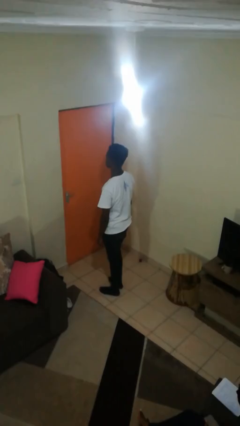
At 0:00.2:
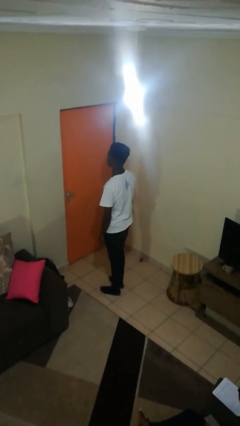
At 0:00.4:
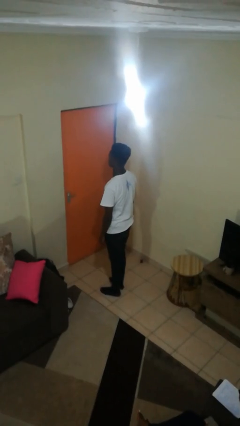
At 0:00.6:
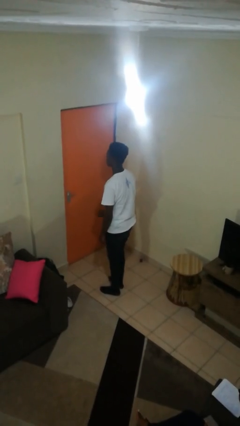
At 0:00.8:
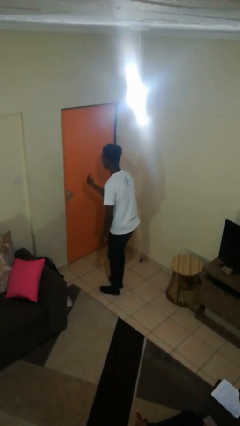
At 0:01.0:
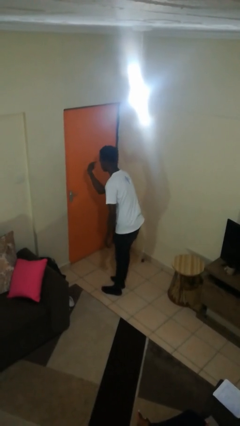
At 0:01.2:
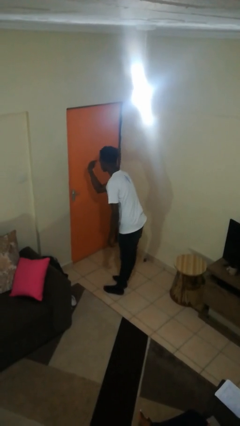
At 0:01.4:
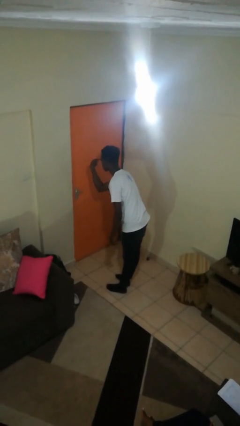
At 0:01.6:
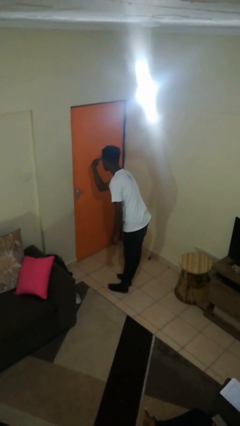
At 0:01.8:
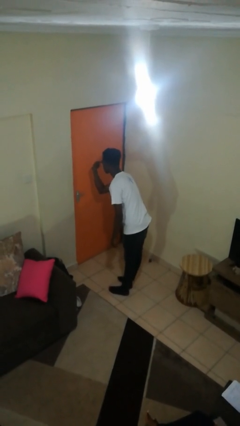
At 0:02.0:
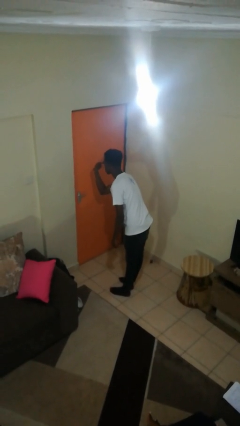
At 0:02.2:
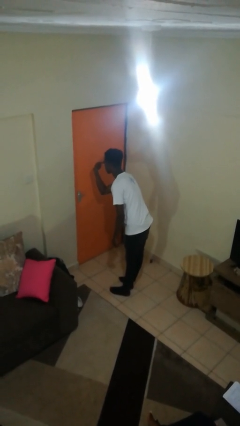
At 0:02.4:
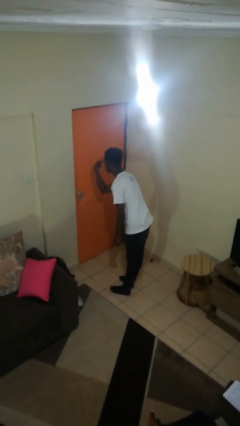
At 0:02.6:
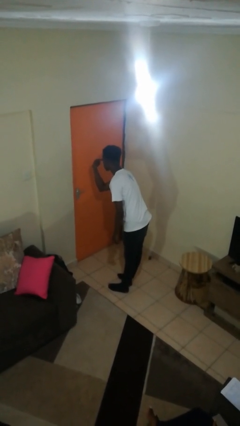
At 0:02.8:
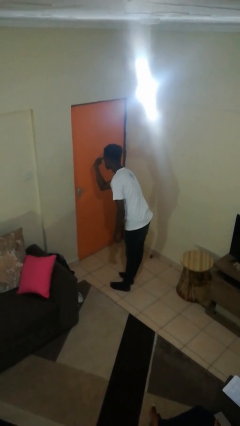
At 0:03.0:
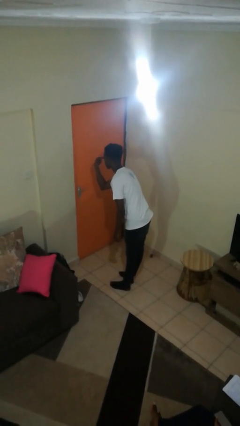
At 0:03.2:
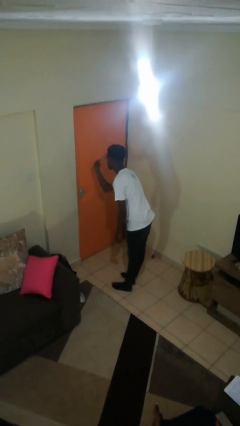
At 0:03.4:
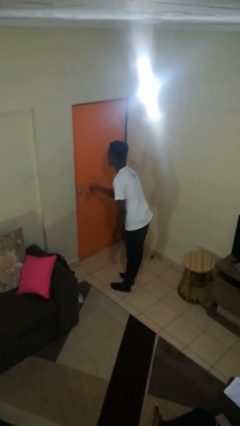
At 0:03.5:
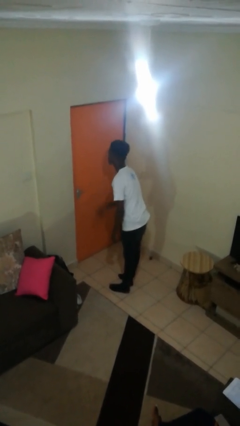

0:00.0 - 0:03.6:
person gestures watch closely

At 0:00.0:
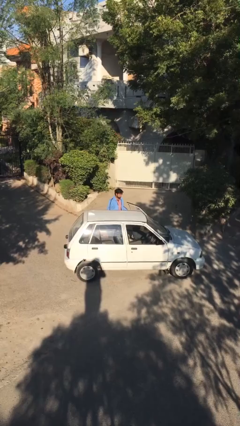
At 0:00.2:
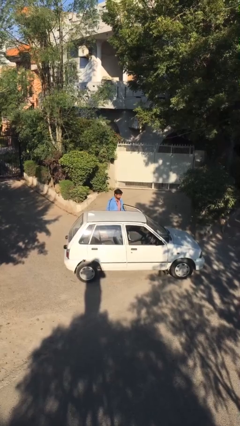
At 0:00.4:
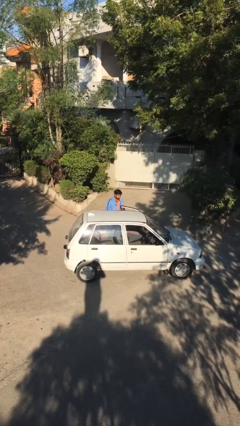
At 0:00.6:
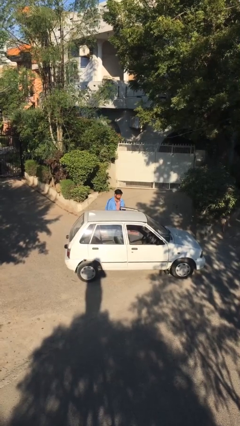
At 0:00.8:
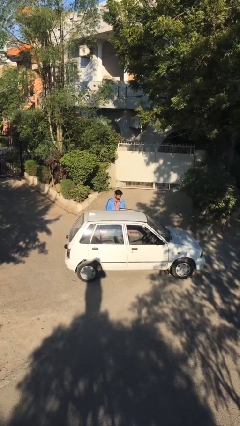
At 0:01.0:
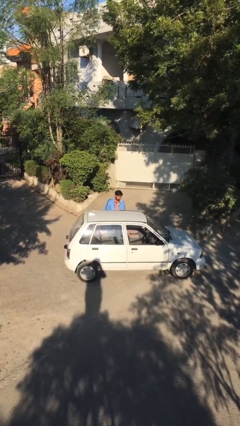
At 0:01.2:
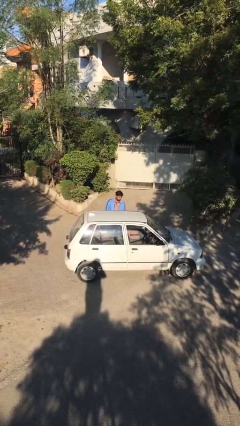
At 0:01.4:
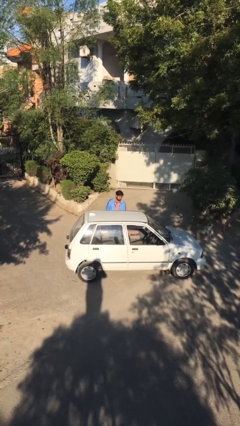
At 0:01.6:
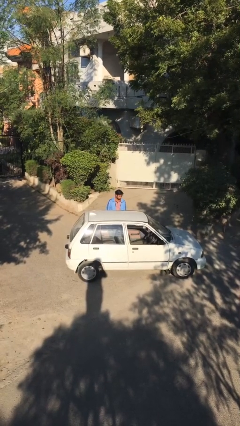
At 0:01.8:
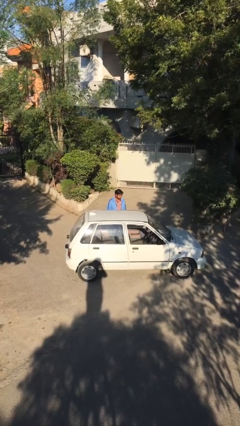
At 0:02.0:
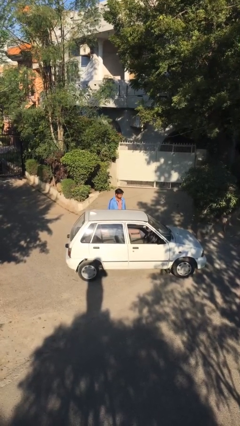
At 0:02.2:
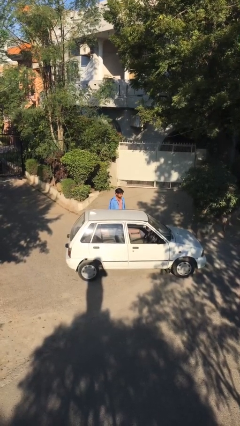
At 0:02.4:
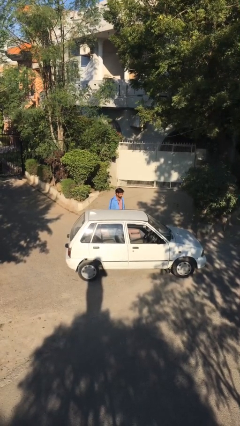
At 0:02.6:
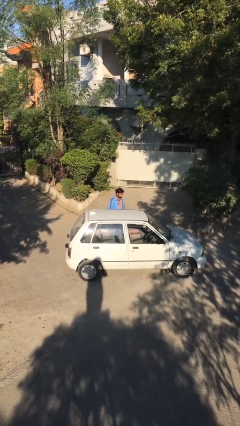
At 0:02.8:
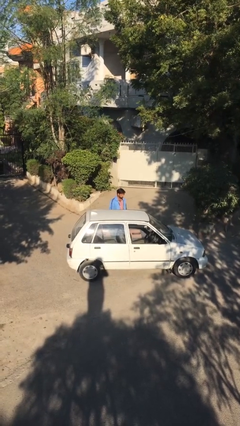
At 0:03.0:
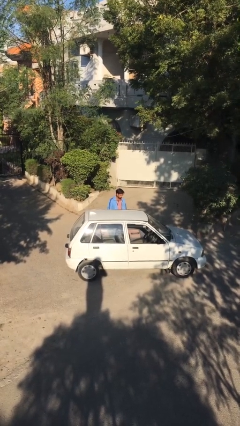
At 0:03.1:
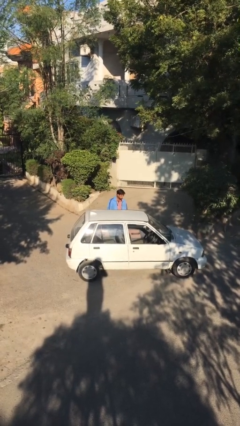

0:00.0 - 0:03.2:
person closes car door

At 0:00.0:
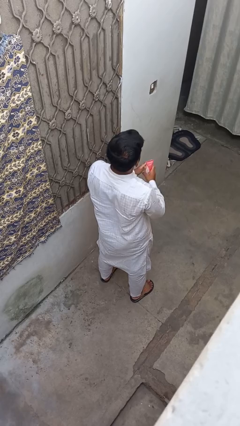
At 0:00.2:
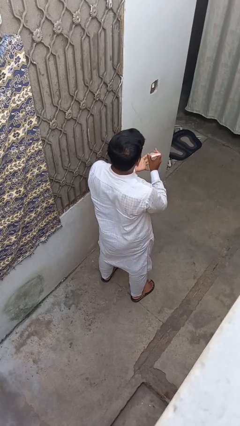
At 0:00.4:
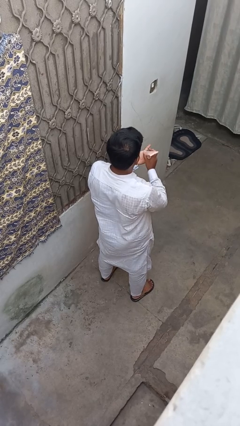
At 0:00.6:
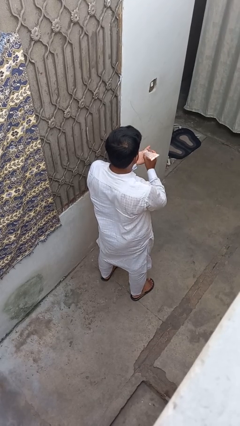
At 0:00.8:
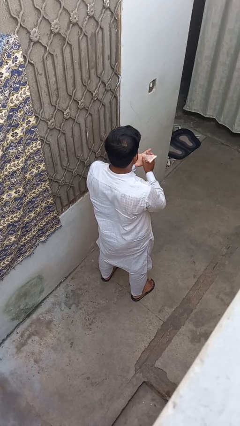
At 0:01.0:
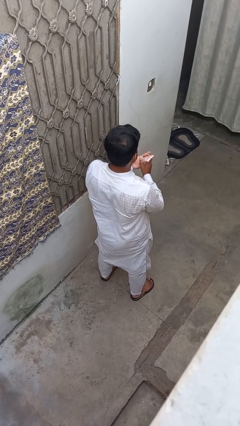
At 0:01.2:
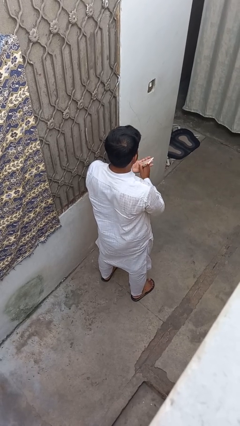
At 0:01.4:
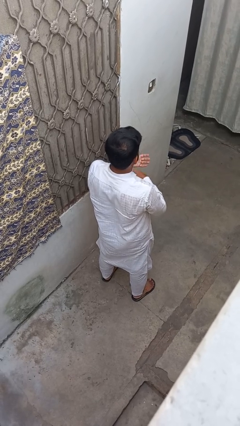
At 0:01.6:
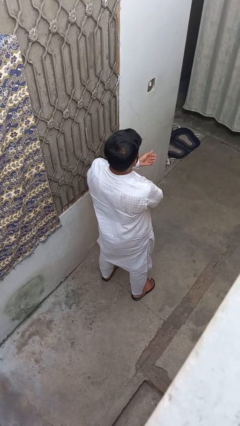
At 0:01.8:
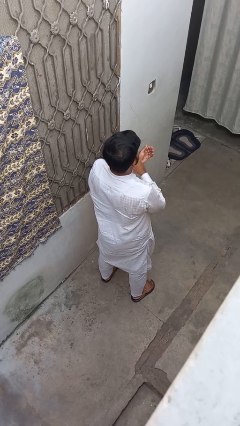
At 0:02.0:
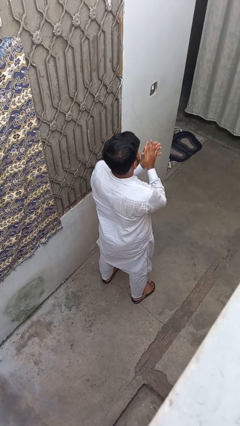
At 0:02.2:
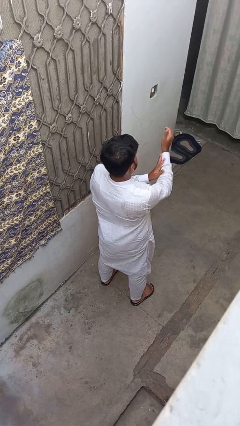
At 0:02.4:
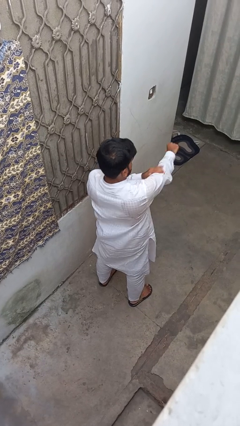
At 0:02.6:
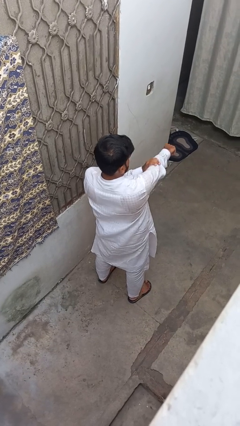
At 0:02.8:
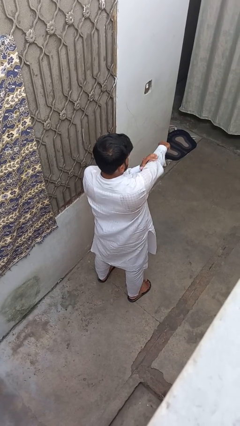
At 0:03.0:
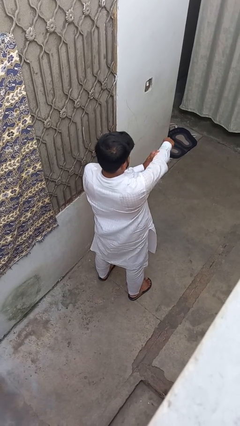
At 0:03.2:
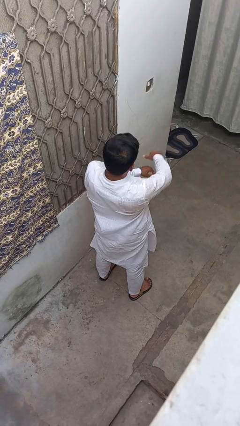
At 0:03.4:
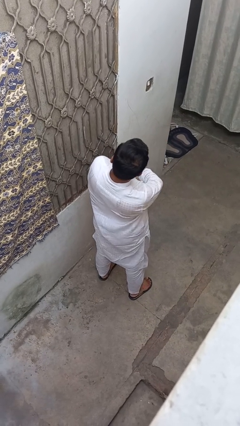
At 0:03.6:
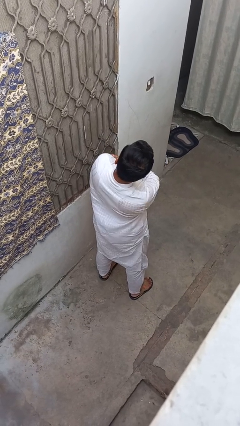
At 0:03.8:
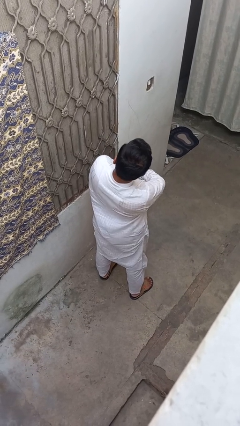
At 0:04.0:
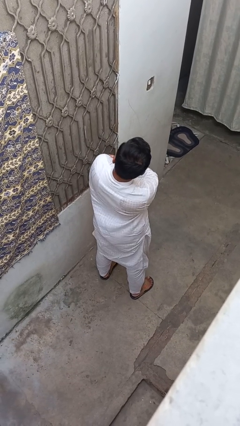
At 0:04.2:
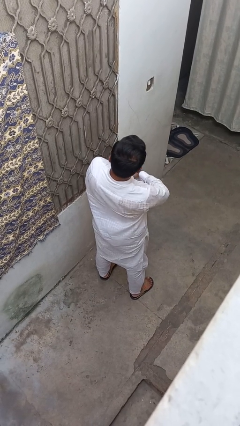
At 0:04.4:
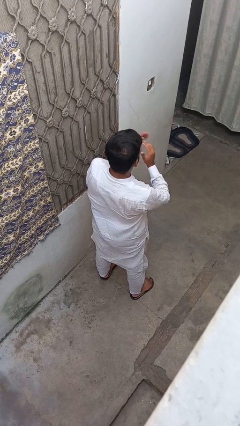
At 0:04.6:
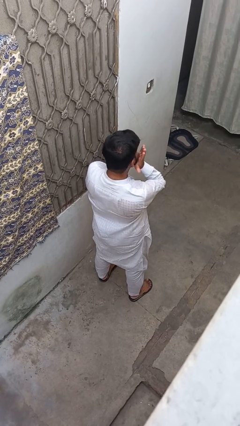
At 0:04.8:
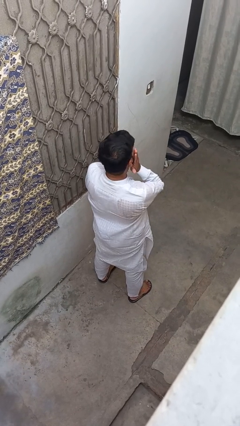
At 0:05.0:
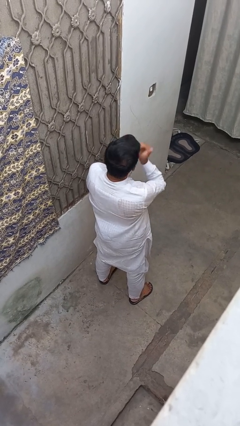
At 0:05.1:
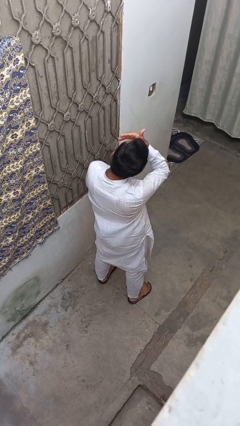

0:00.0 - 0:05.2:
person applies sunscreen

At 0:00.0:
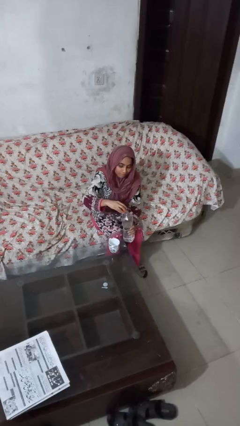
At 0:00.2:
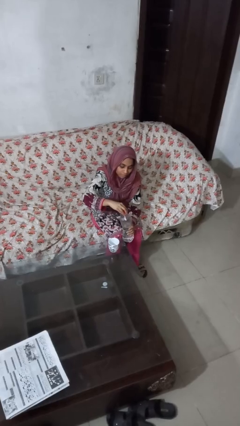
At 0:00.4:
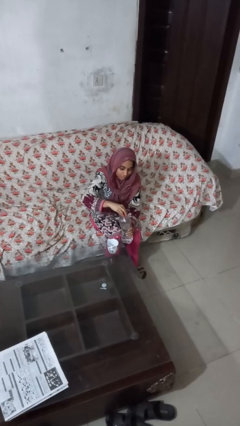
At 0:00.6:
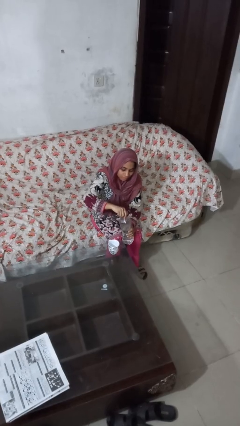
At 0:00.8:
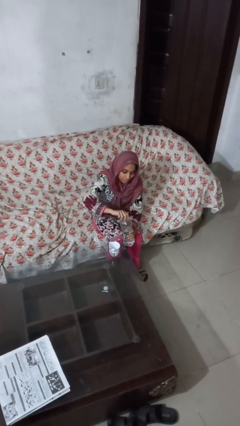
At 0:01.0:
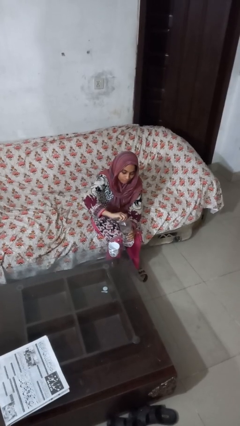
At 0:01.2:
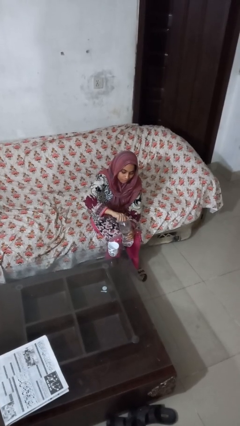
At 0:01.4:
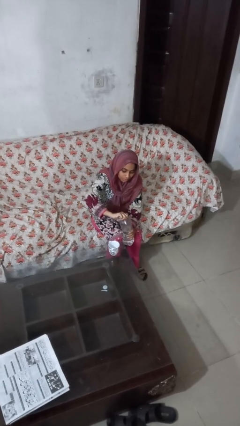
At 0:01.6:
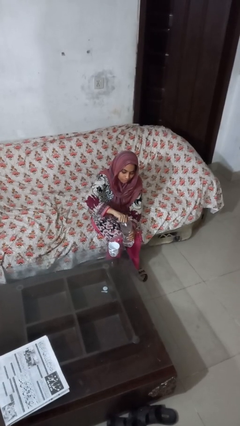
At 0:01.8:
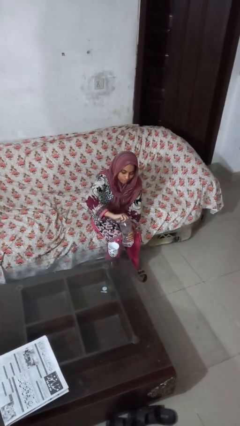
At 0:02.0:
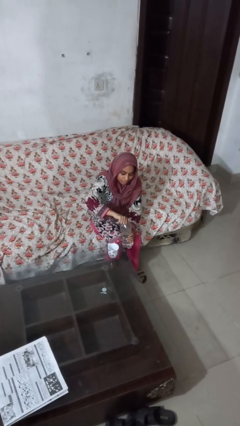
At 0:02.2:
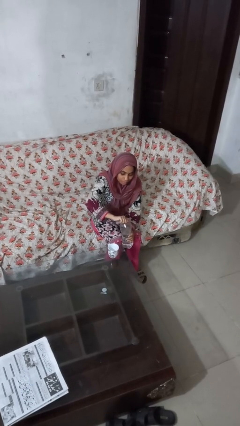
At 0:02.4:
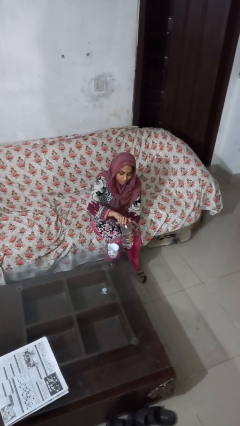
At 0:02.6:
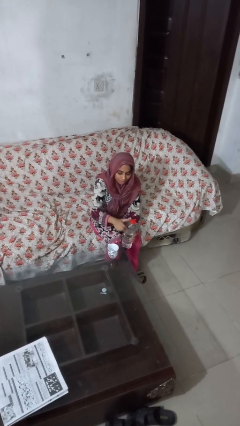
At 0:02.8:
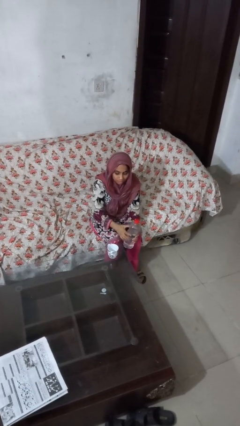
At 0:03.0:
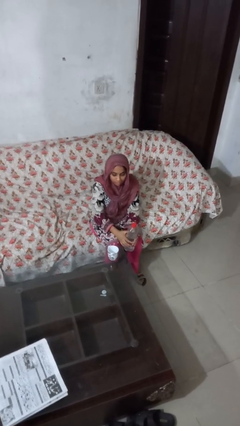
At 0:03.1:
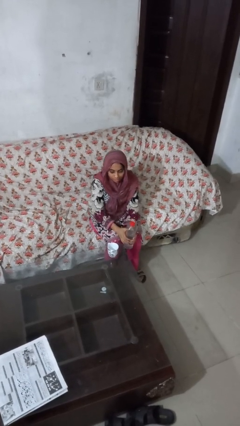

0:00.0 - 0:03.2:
person screws lid to bottle

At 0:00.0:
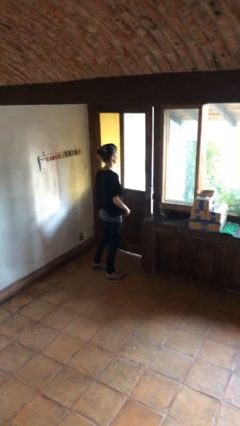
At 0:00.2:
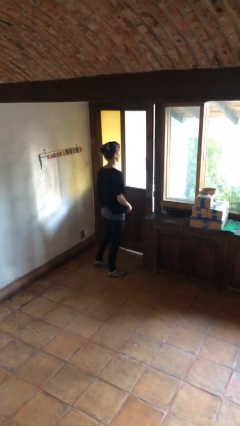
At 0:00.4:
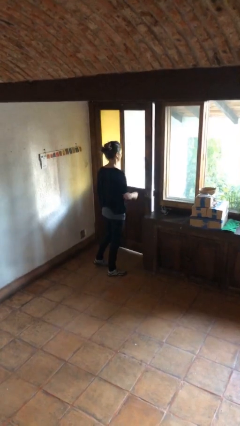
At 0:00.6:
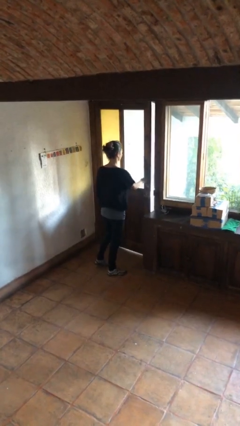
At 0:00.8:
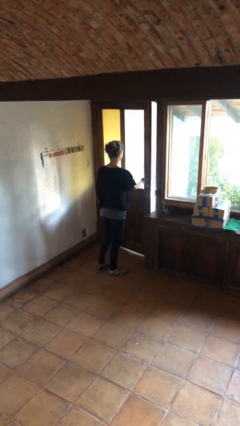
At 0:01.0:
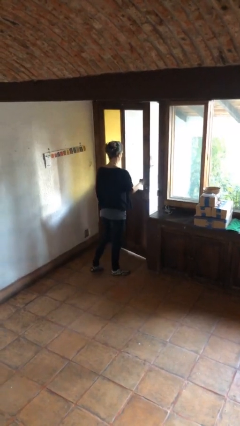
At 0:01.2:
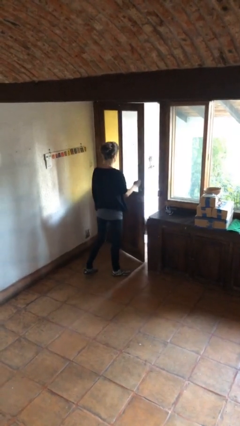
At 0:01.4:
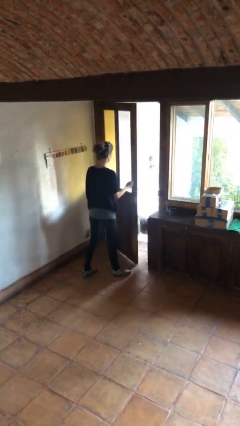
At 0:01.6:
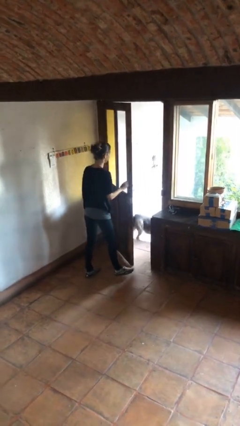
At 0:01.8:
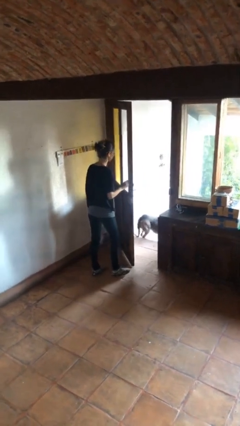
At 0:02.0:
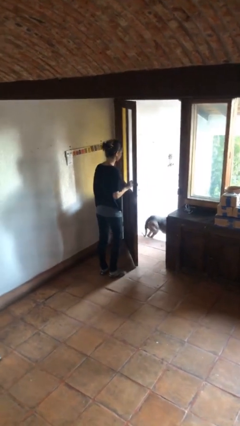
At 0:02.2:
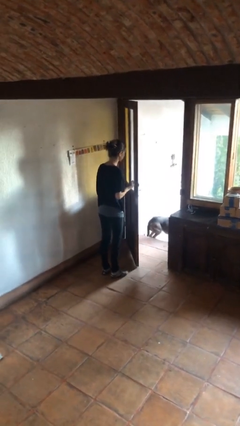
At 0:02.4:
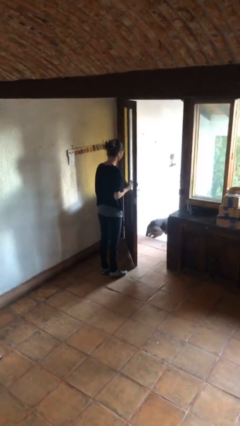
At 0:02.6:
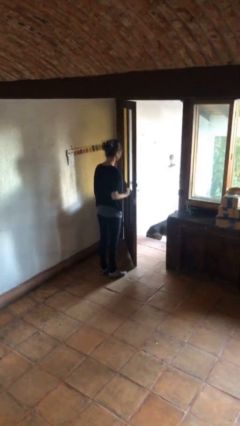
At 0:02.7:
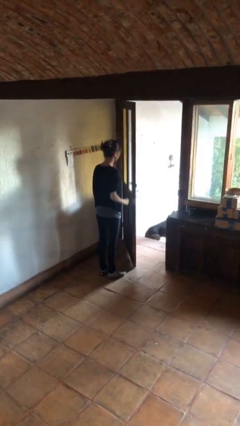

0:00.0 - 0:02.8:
person opens facility door
